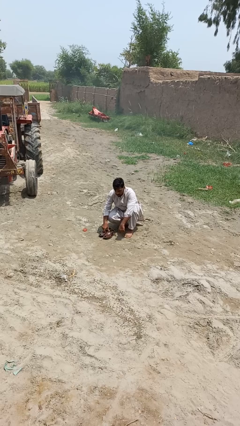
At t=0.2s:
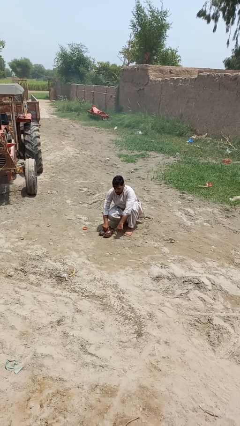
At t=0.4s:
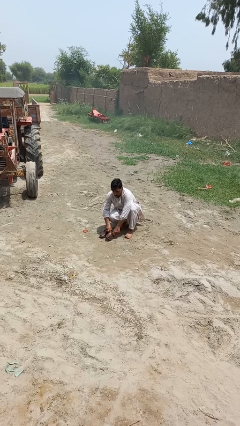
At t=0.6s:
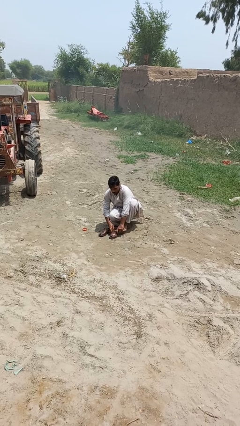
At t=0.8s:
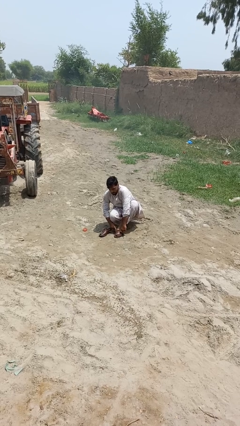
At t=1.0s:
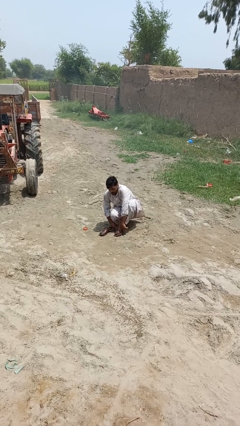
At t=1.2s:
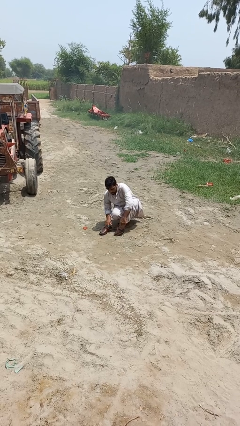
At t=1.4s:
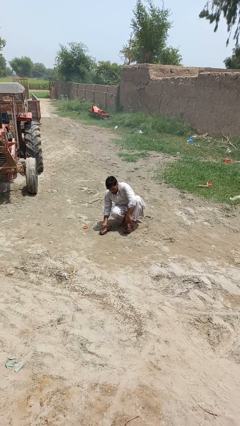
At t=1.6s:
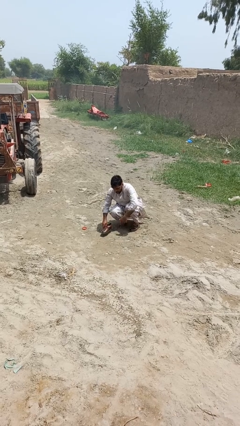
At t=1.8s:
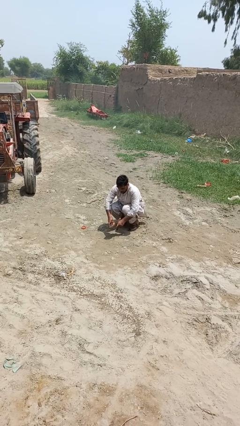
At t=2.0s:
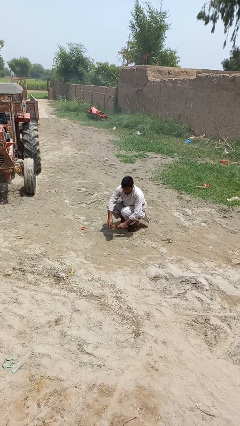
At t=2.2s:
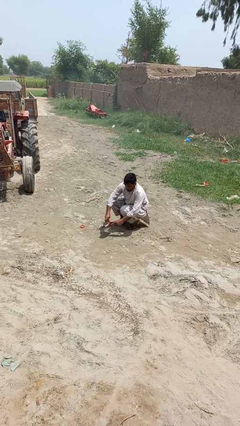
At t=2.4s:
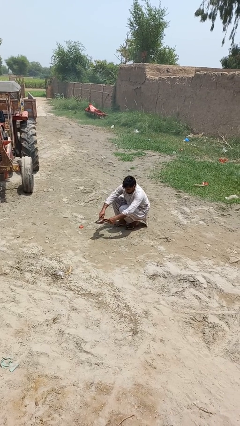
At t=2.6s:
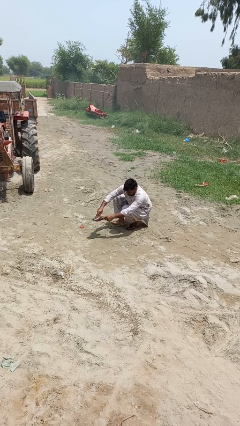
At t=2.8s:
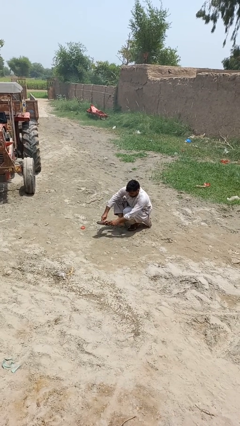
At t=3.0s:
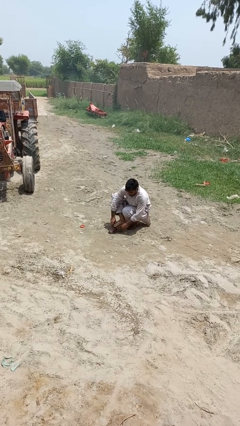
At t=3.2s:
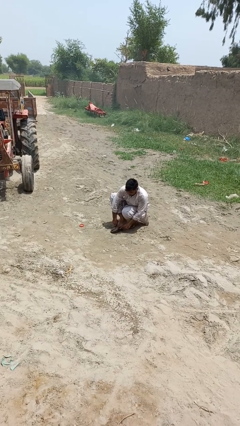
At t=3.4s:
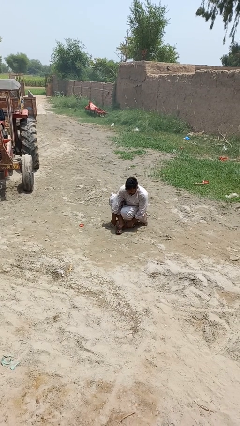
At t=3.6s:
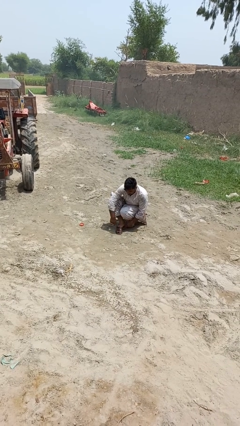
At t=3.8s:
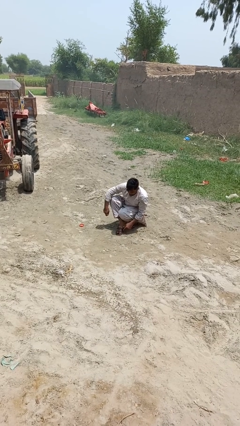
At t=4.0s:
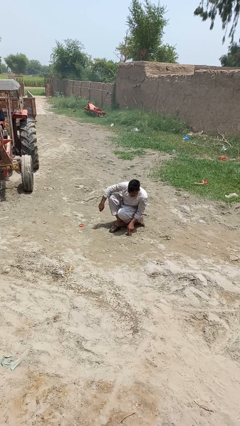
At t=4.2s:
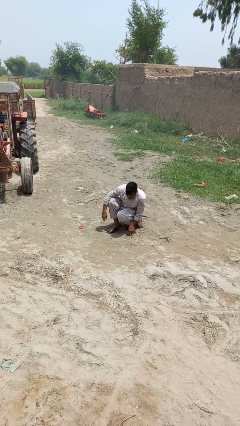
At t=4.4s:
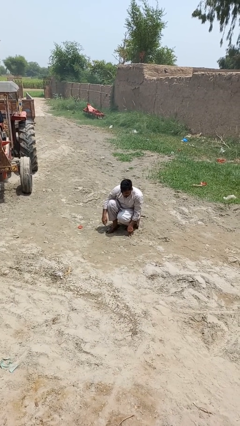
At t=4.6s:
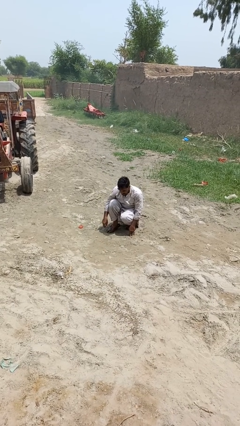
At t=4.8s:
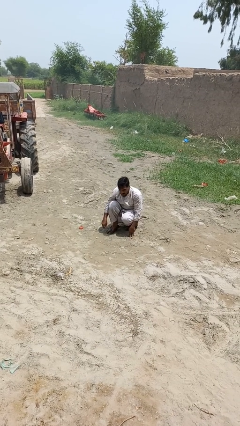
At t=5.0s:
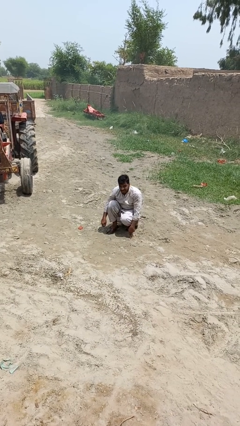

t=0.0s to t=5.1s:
person puts on shoes

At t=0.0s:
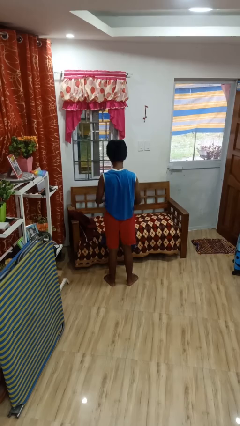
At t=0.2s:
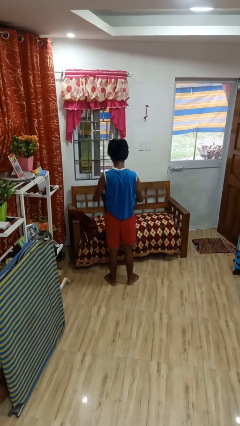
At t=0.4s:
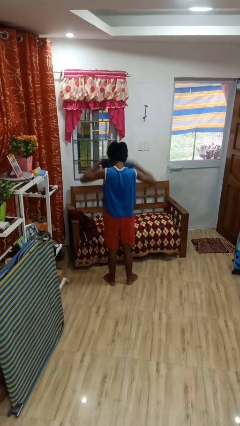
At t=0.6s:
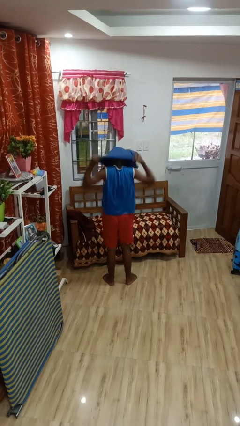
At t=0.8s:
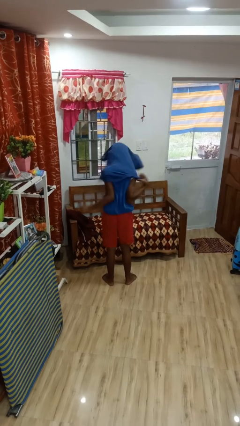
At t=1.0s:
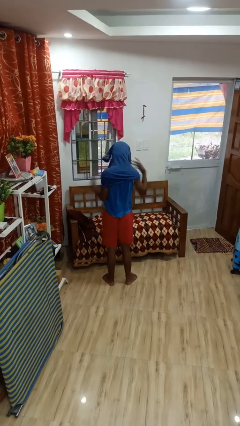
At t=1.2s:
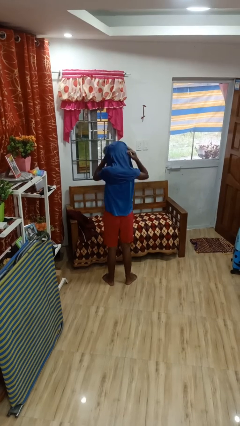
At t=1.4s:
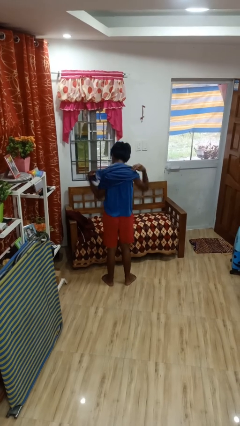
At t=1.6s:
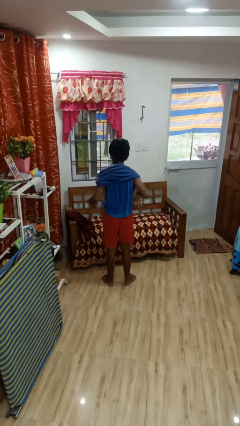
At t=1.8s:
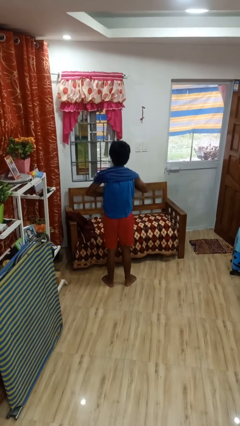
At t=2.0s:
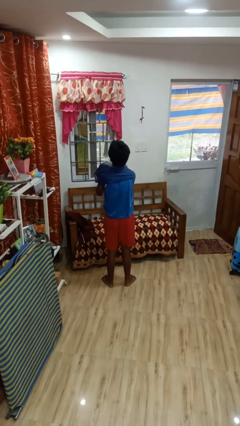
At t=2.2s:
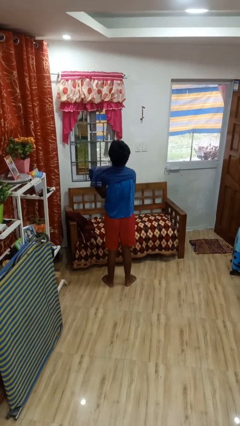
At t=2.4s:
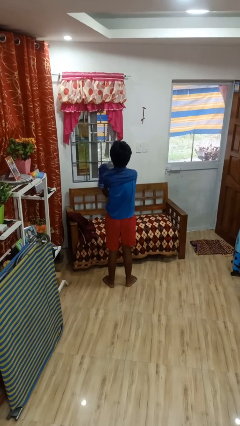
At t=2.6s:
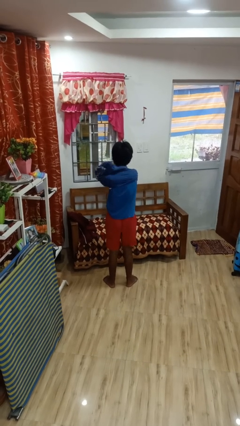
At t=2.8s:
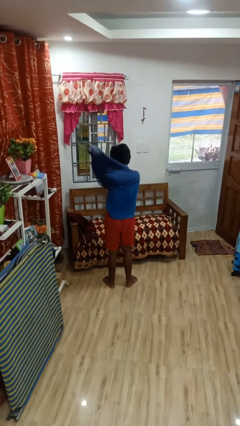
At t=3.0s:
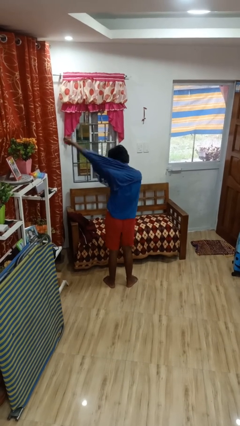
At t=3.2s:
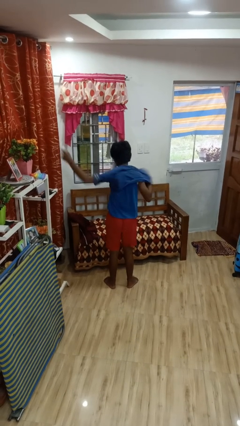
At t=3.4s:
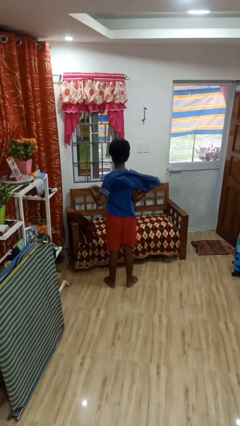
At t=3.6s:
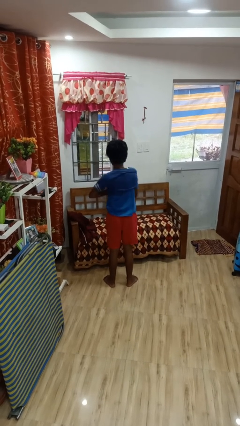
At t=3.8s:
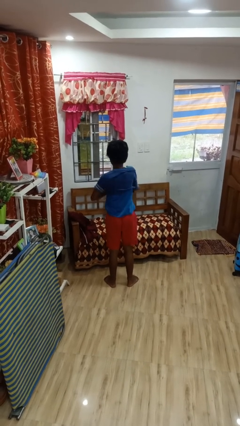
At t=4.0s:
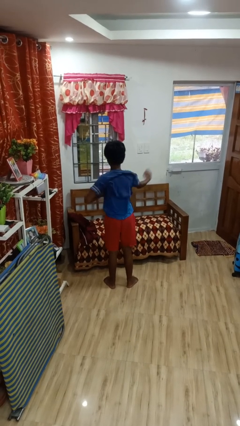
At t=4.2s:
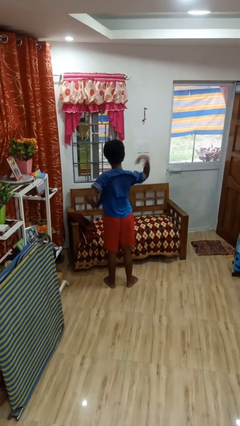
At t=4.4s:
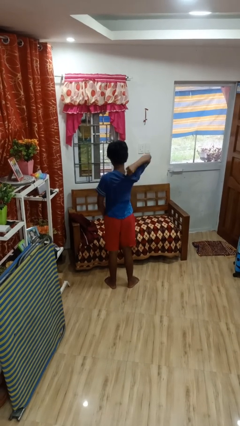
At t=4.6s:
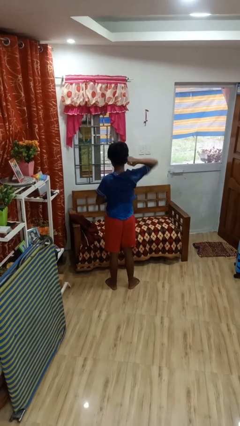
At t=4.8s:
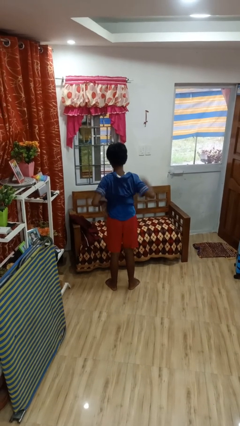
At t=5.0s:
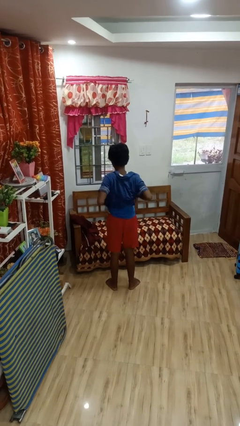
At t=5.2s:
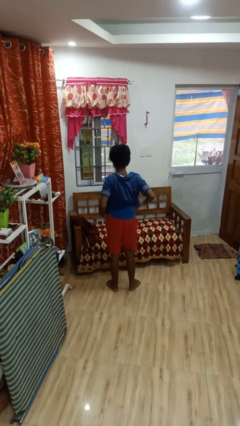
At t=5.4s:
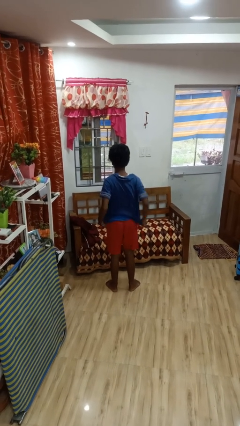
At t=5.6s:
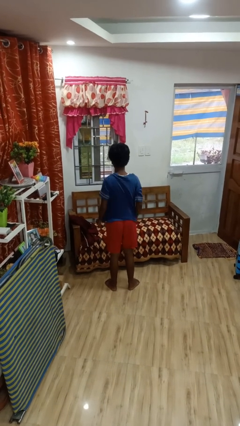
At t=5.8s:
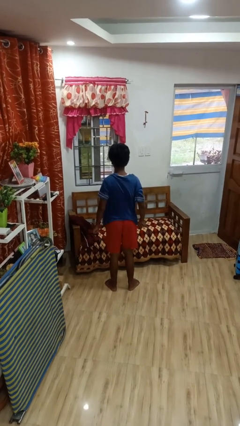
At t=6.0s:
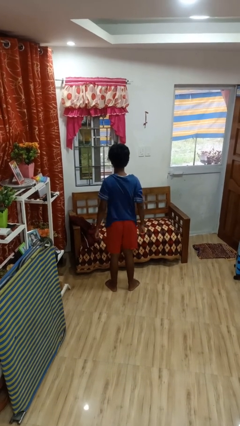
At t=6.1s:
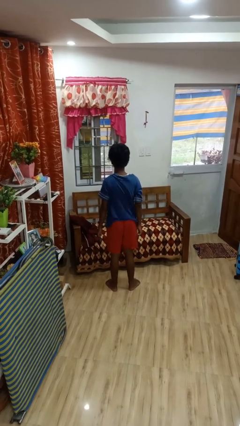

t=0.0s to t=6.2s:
person puts on shirt

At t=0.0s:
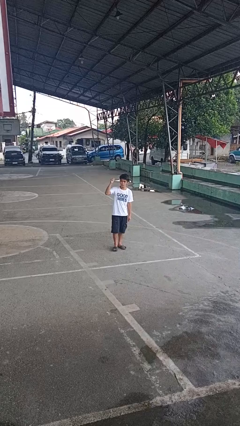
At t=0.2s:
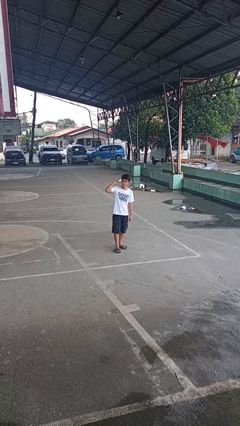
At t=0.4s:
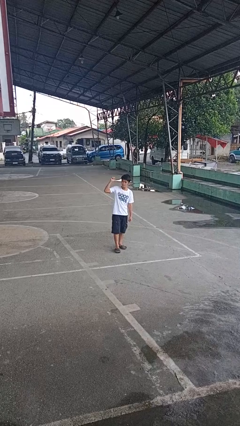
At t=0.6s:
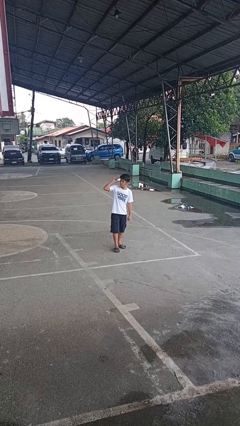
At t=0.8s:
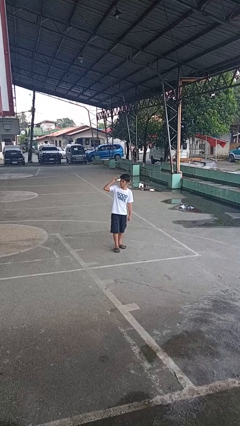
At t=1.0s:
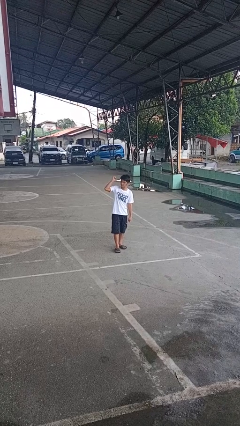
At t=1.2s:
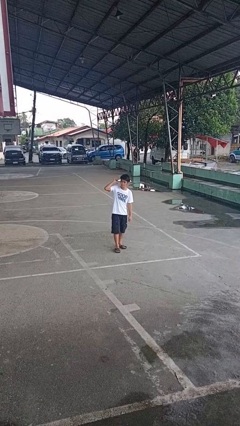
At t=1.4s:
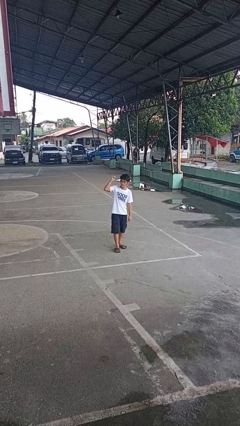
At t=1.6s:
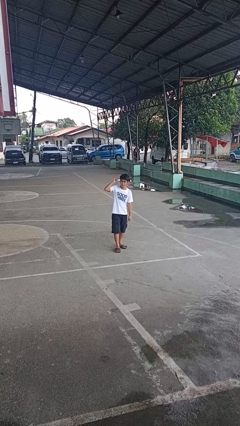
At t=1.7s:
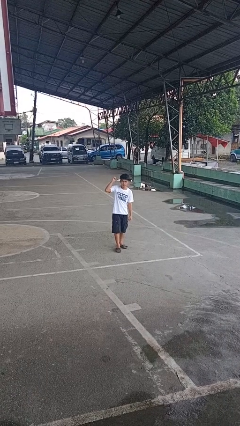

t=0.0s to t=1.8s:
person gestures behind me

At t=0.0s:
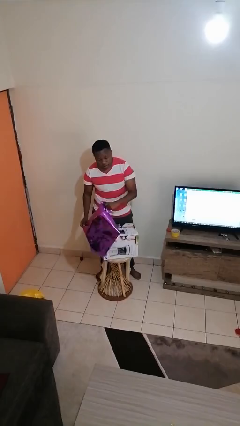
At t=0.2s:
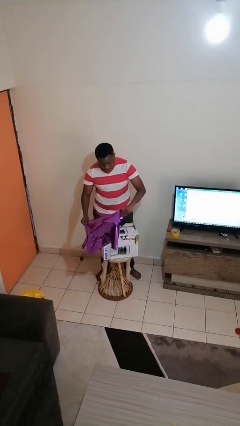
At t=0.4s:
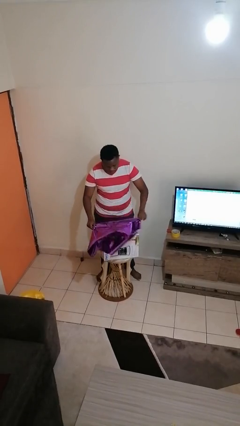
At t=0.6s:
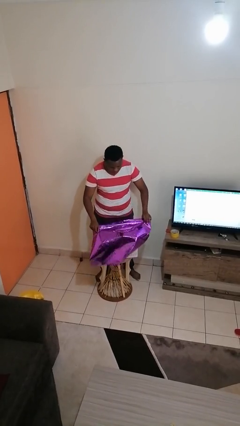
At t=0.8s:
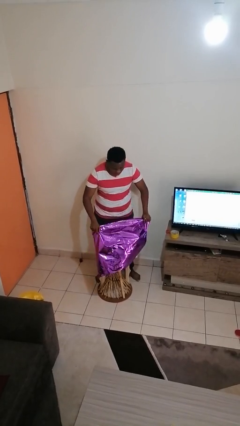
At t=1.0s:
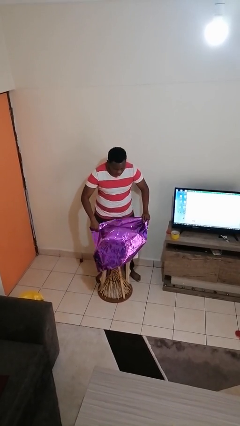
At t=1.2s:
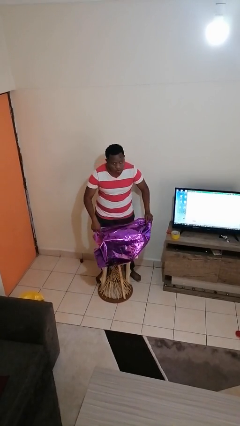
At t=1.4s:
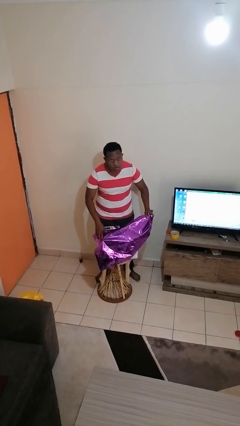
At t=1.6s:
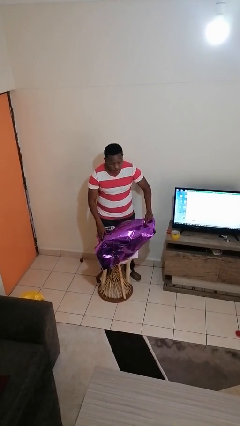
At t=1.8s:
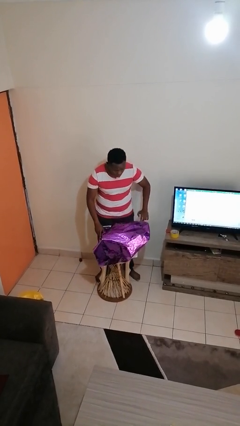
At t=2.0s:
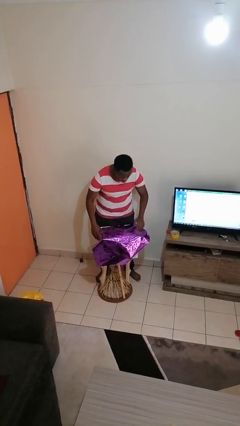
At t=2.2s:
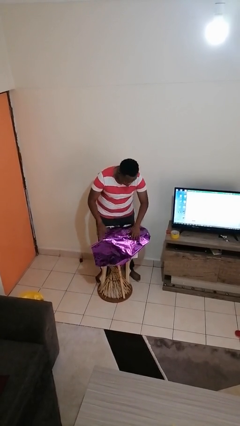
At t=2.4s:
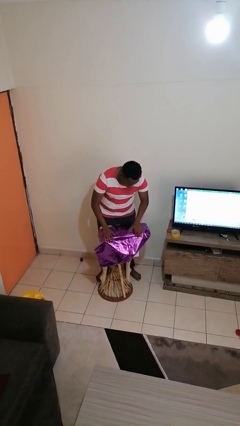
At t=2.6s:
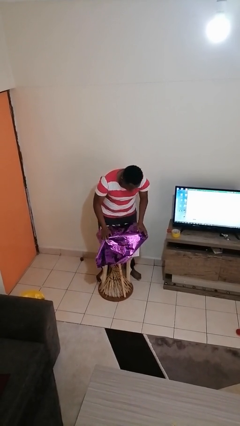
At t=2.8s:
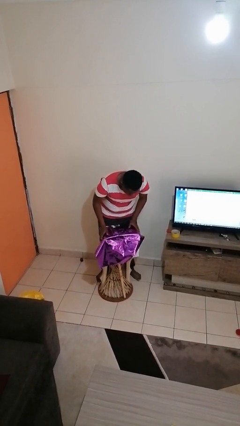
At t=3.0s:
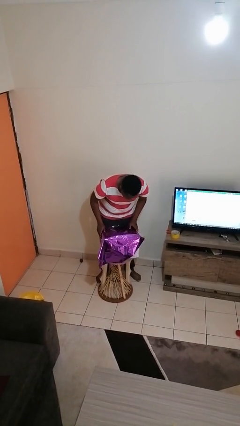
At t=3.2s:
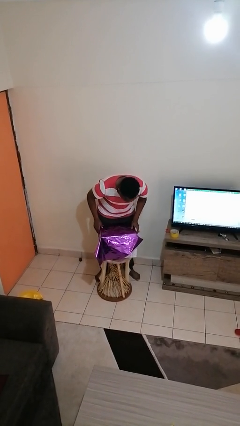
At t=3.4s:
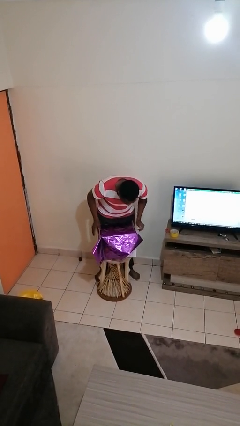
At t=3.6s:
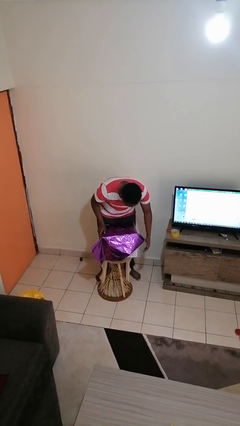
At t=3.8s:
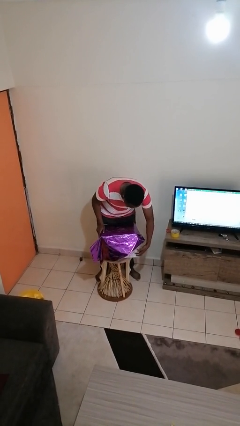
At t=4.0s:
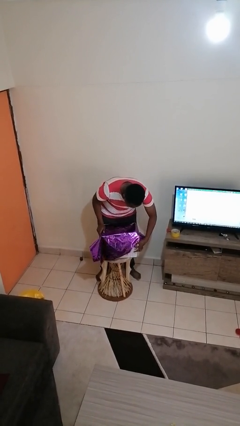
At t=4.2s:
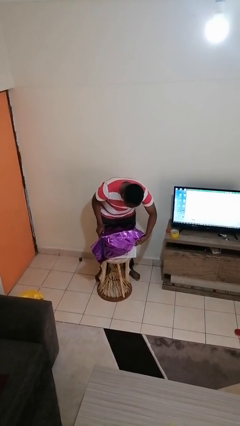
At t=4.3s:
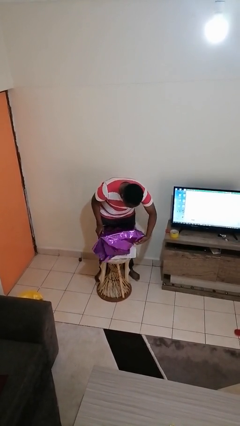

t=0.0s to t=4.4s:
person wraps box

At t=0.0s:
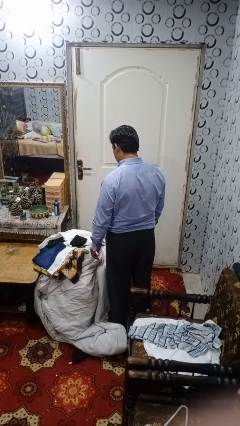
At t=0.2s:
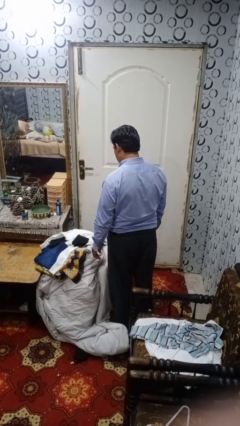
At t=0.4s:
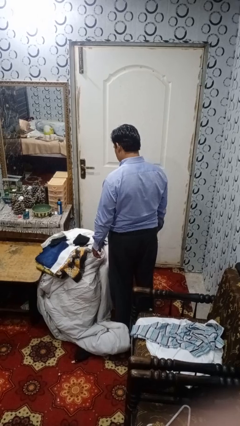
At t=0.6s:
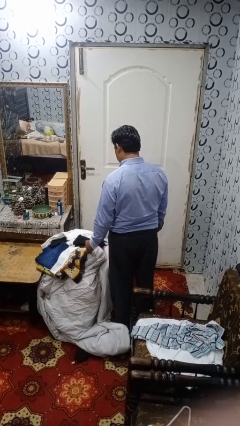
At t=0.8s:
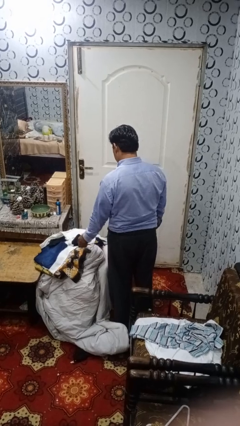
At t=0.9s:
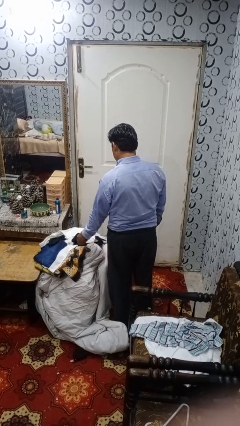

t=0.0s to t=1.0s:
person folds socks
